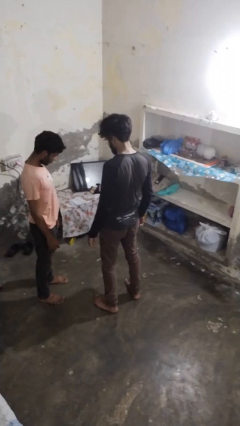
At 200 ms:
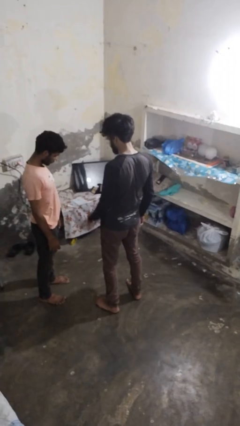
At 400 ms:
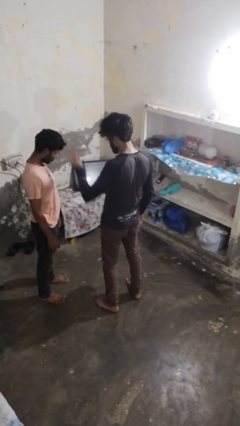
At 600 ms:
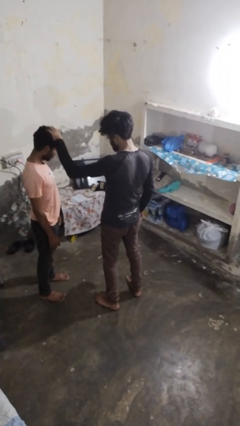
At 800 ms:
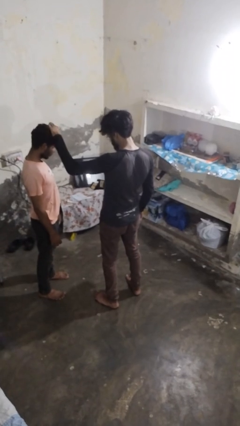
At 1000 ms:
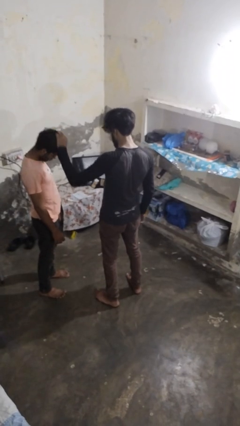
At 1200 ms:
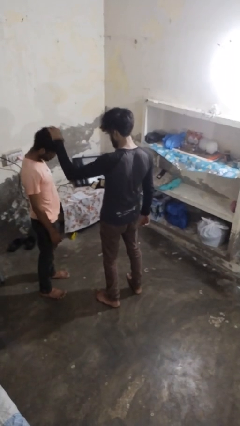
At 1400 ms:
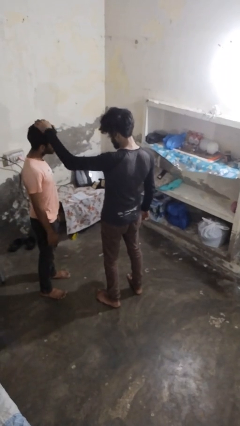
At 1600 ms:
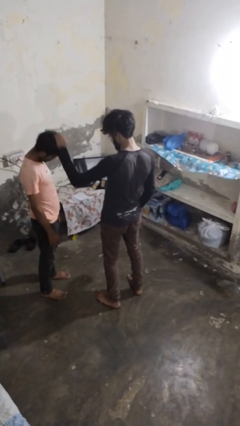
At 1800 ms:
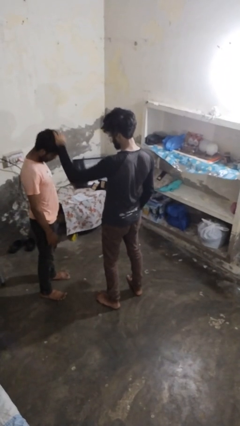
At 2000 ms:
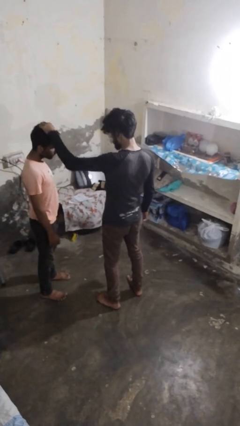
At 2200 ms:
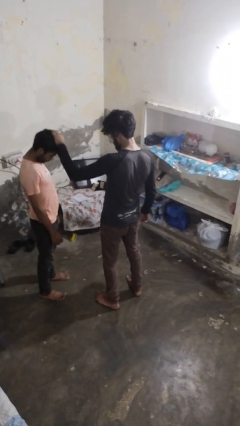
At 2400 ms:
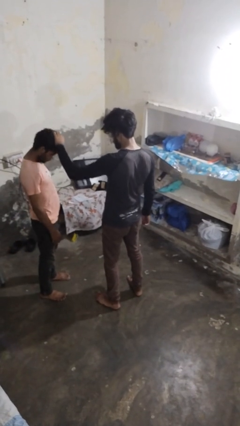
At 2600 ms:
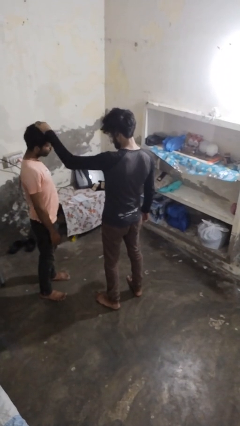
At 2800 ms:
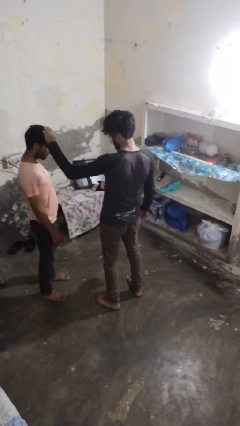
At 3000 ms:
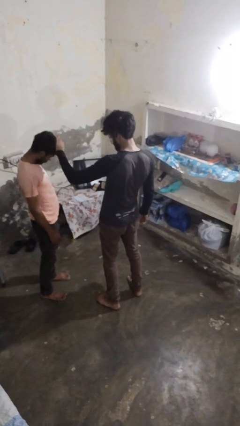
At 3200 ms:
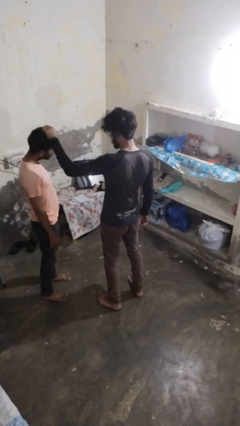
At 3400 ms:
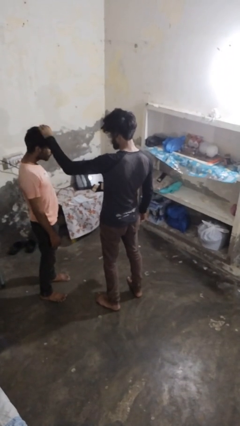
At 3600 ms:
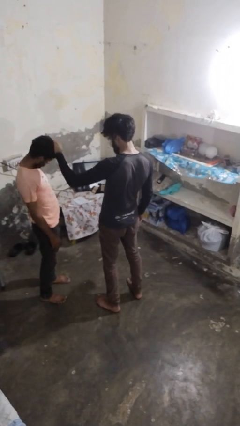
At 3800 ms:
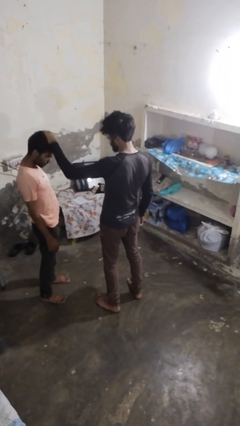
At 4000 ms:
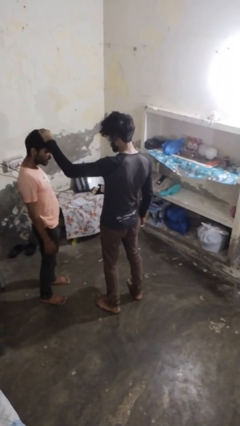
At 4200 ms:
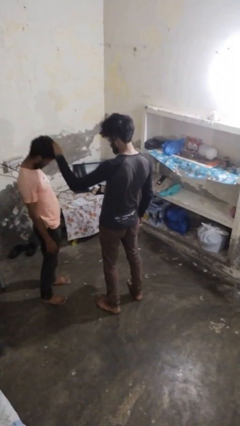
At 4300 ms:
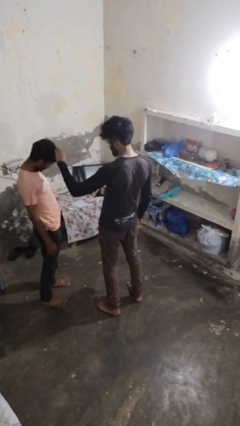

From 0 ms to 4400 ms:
person grabs person by hair

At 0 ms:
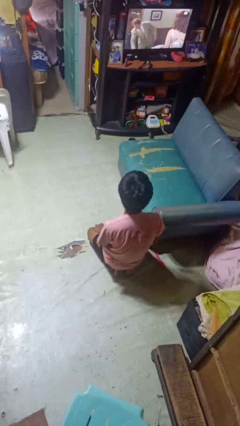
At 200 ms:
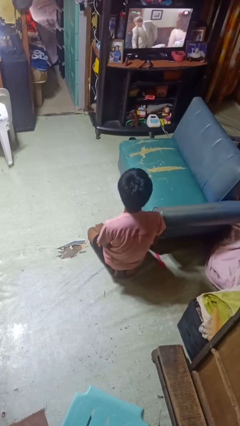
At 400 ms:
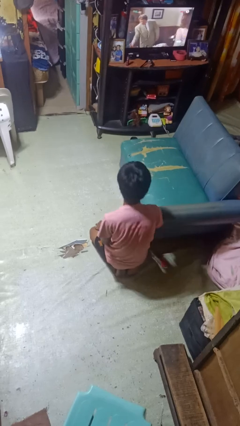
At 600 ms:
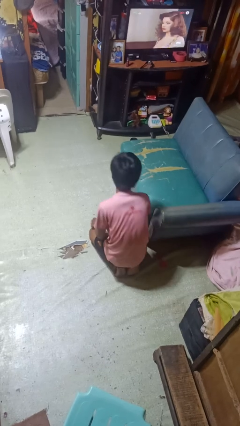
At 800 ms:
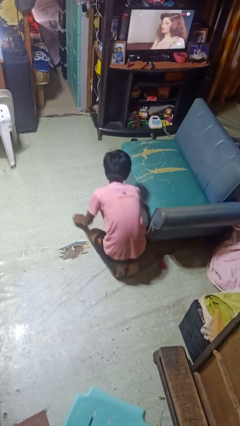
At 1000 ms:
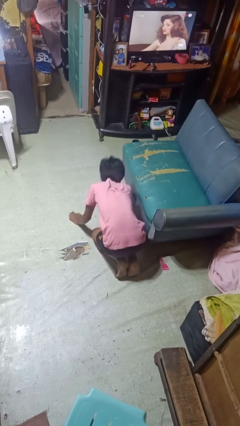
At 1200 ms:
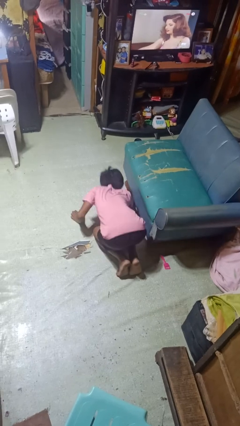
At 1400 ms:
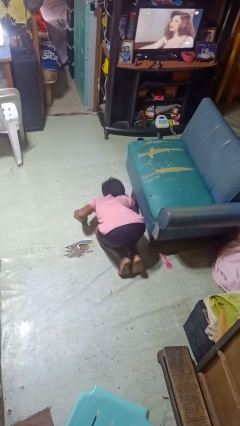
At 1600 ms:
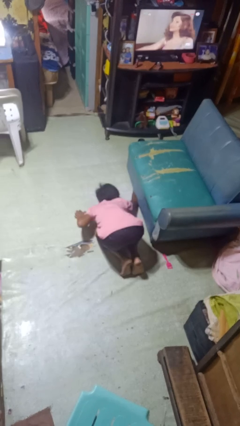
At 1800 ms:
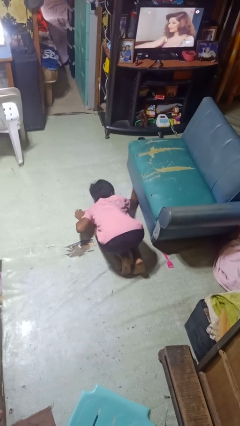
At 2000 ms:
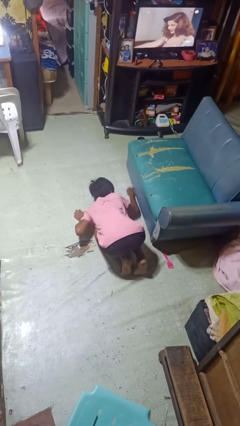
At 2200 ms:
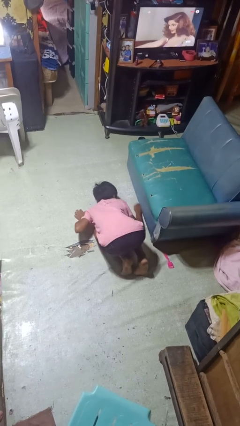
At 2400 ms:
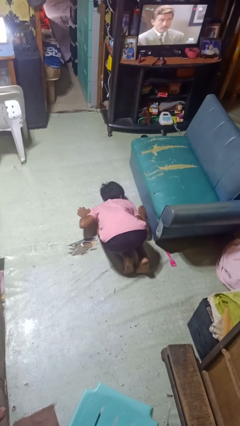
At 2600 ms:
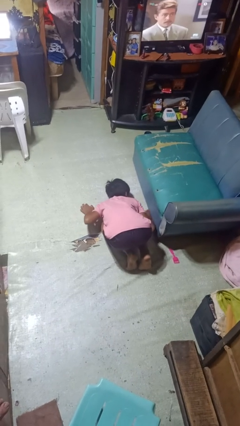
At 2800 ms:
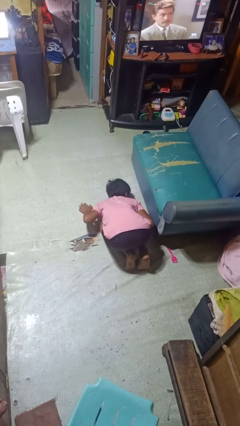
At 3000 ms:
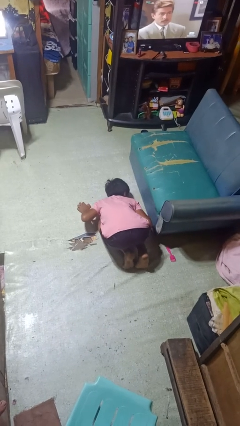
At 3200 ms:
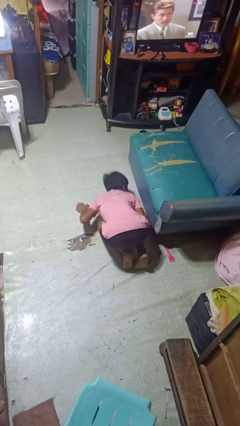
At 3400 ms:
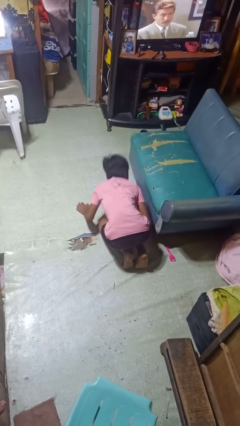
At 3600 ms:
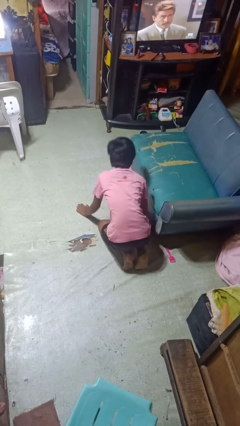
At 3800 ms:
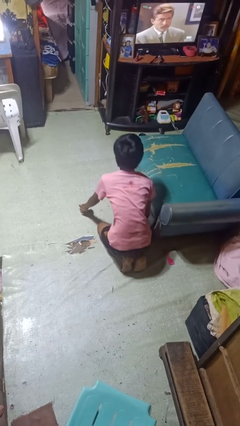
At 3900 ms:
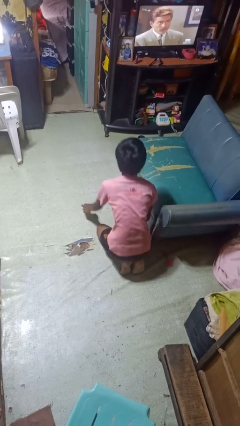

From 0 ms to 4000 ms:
person searches under couch

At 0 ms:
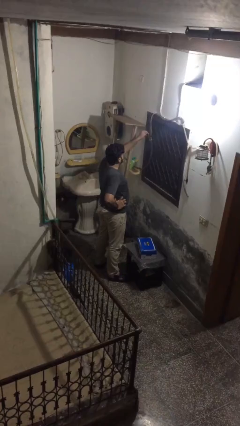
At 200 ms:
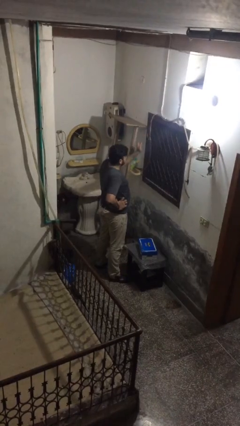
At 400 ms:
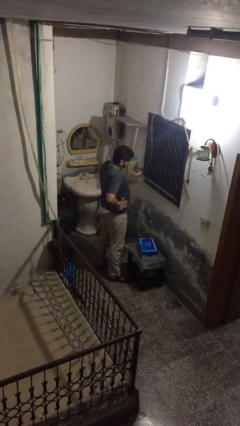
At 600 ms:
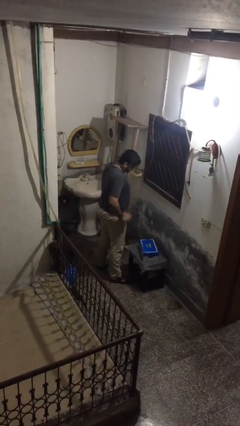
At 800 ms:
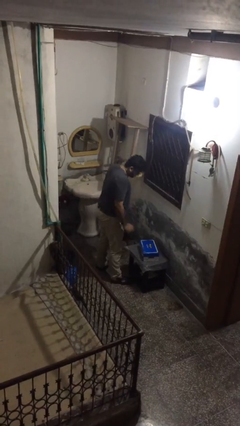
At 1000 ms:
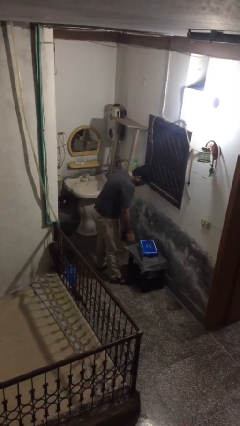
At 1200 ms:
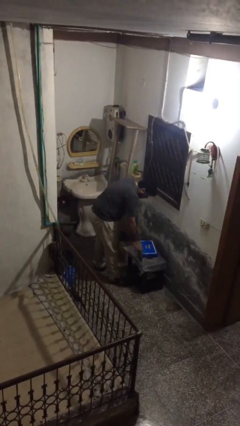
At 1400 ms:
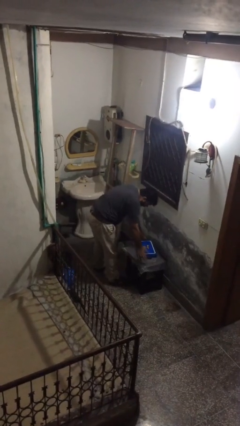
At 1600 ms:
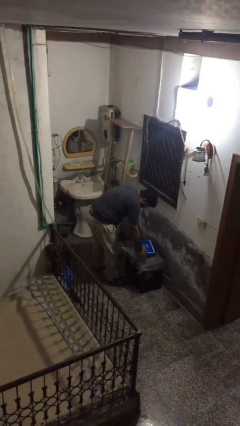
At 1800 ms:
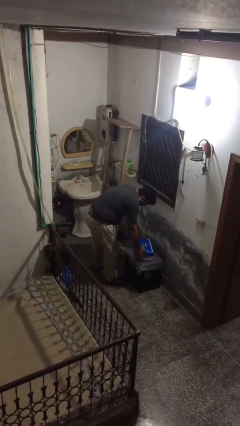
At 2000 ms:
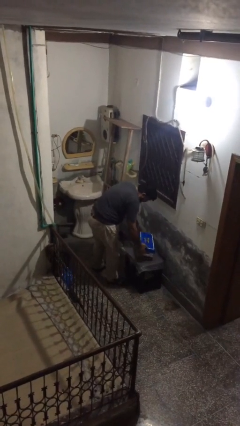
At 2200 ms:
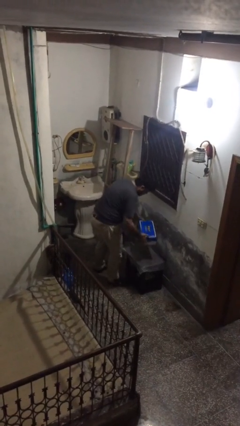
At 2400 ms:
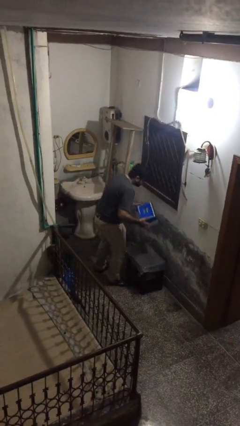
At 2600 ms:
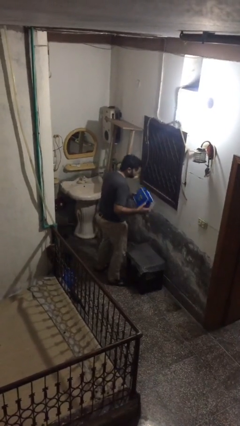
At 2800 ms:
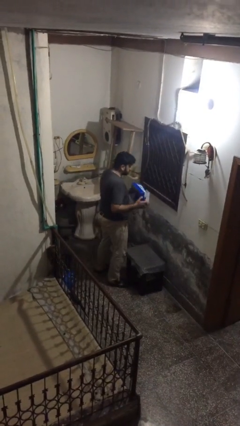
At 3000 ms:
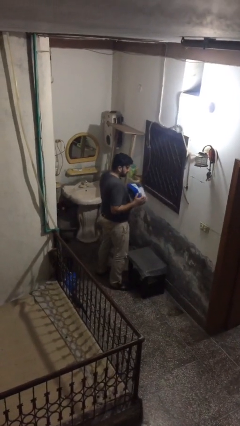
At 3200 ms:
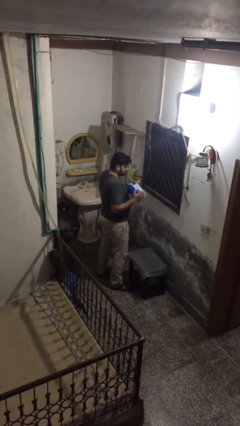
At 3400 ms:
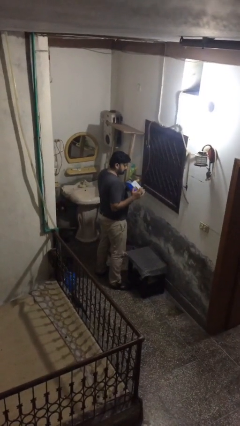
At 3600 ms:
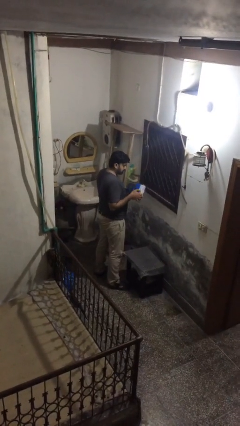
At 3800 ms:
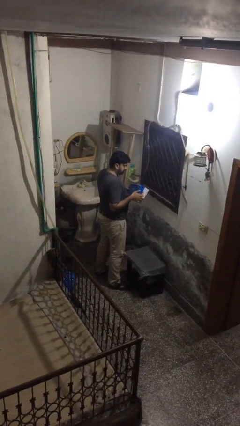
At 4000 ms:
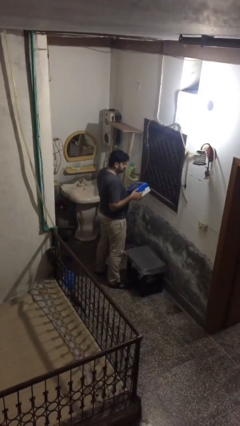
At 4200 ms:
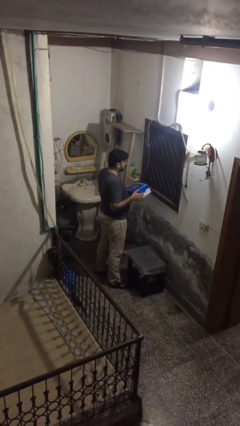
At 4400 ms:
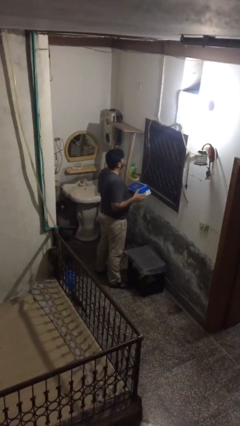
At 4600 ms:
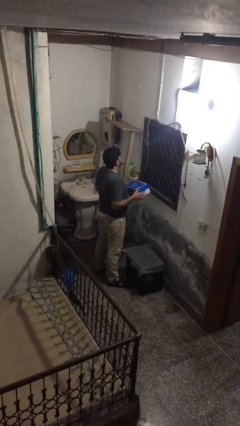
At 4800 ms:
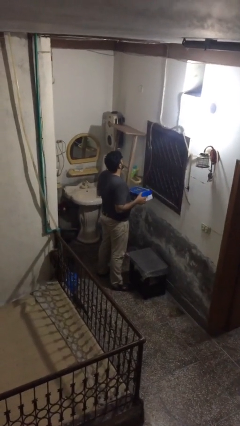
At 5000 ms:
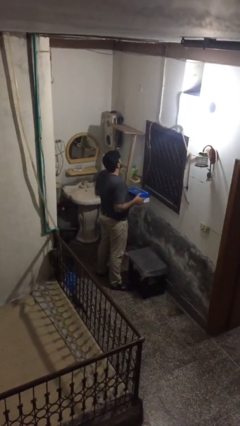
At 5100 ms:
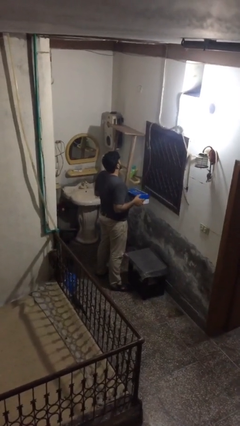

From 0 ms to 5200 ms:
person picks up object from table

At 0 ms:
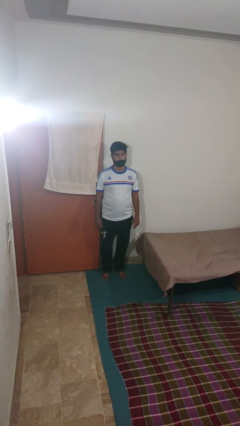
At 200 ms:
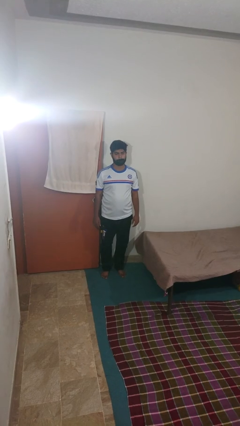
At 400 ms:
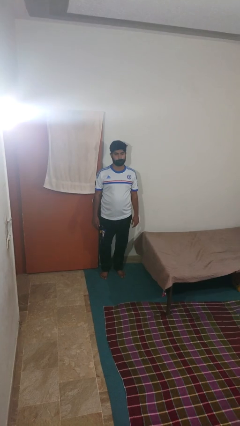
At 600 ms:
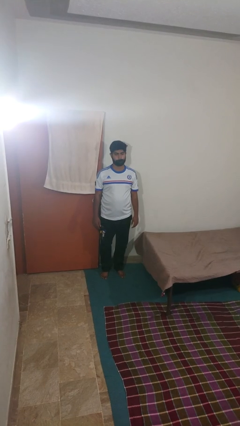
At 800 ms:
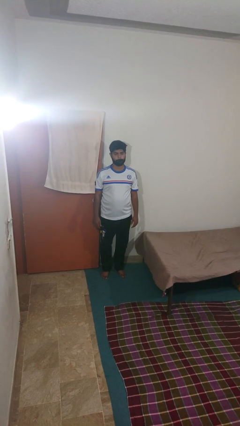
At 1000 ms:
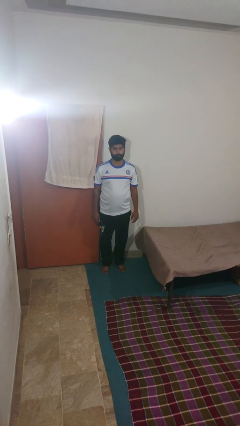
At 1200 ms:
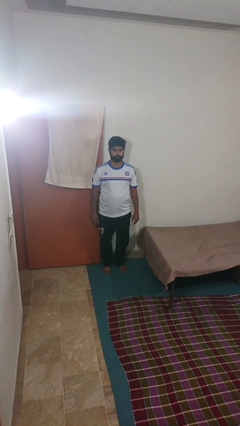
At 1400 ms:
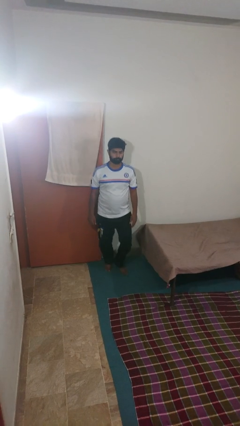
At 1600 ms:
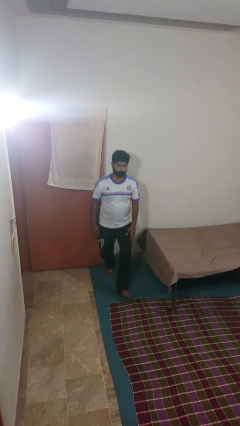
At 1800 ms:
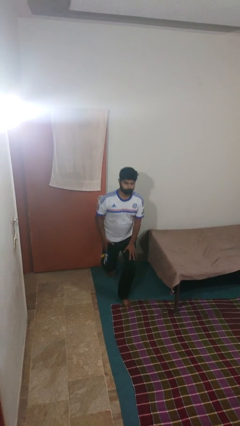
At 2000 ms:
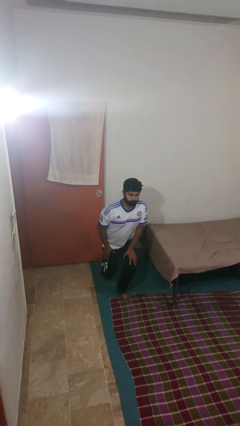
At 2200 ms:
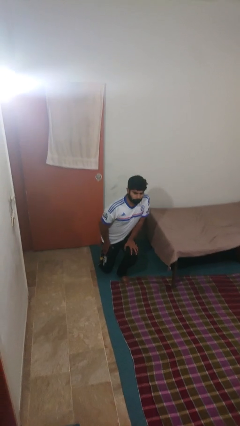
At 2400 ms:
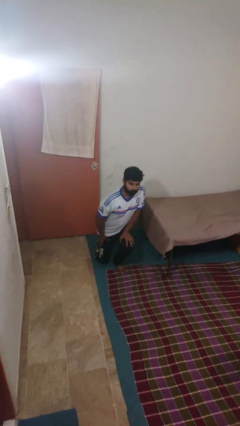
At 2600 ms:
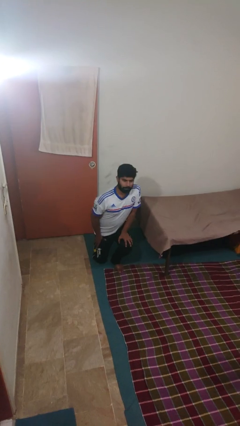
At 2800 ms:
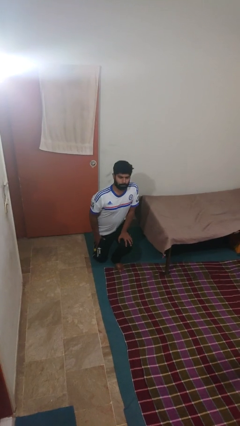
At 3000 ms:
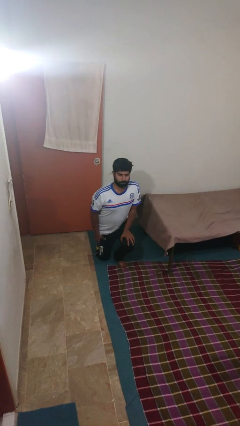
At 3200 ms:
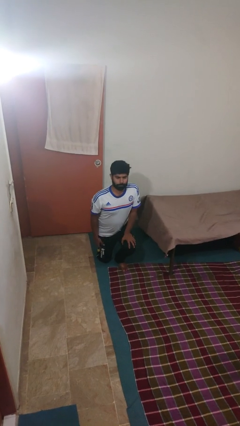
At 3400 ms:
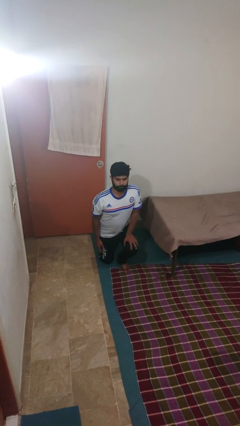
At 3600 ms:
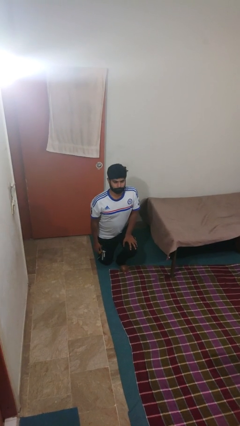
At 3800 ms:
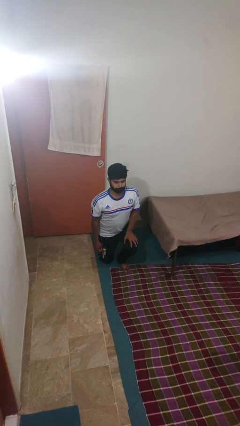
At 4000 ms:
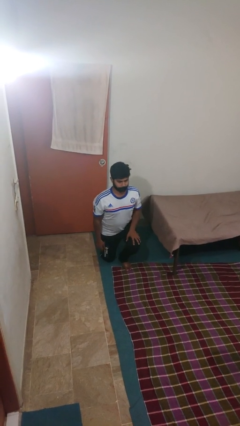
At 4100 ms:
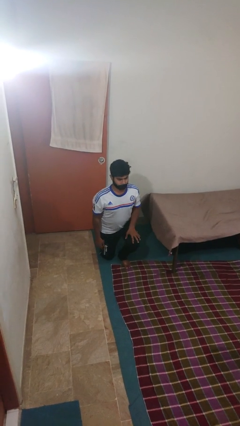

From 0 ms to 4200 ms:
person kneels
